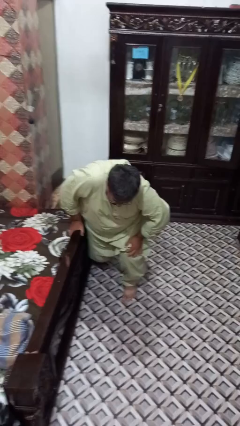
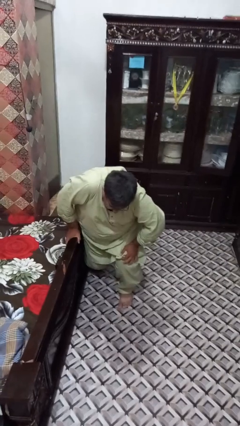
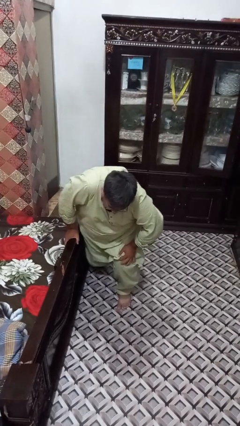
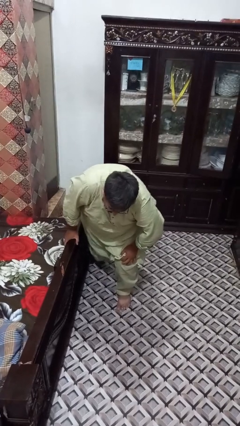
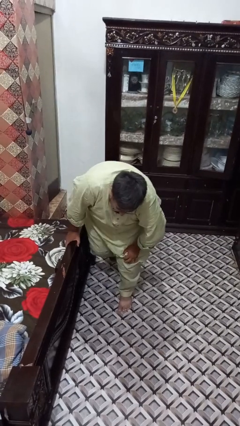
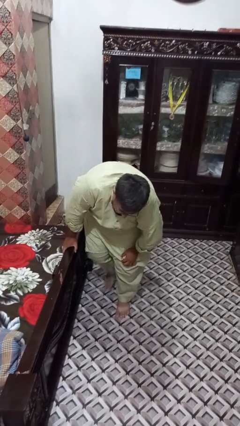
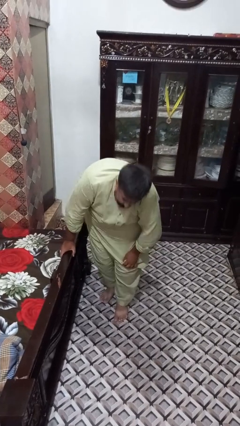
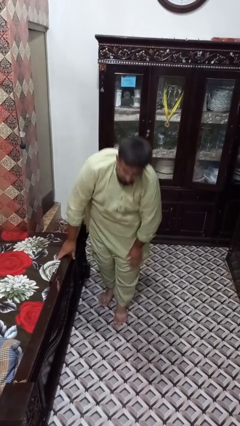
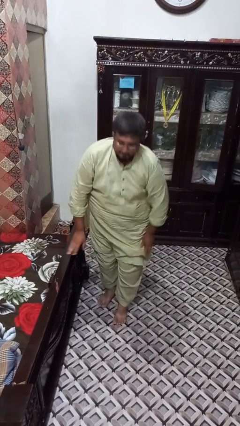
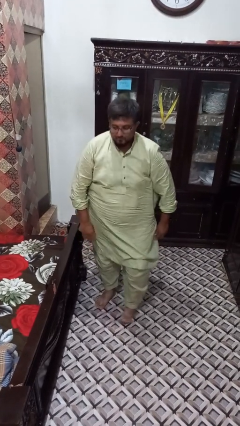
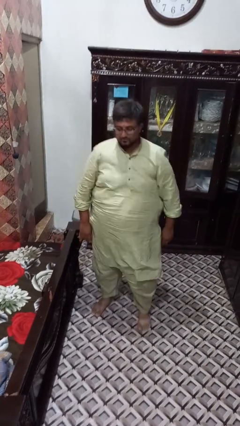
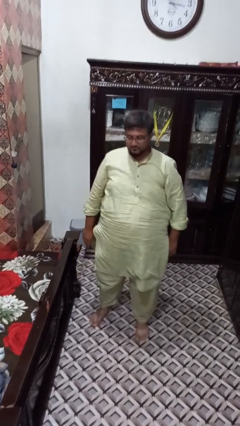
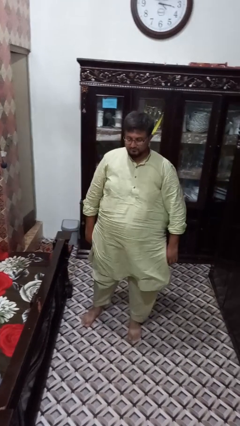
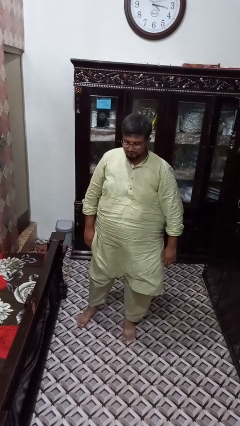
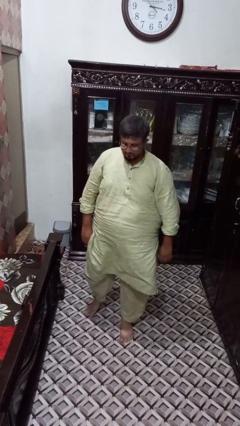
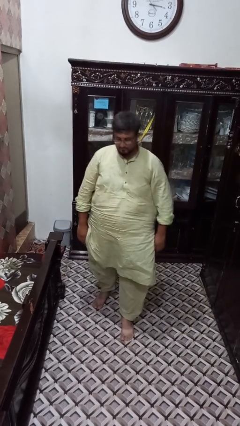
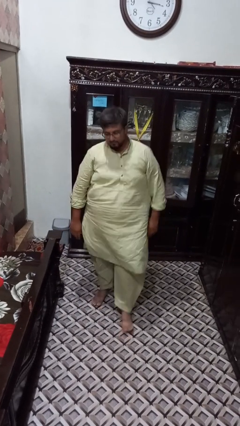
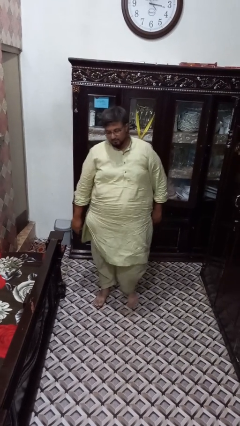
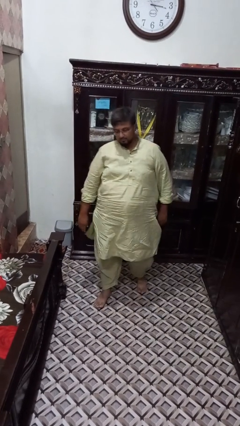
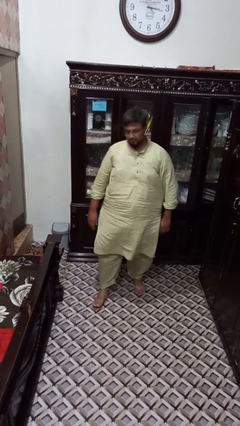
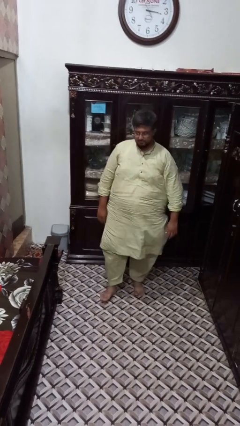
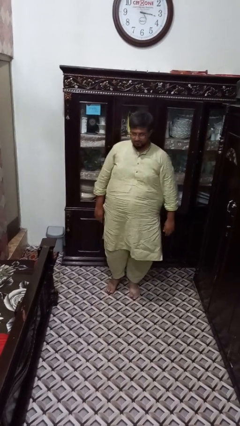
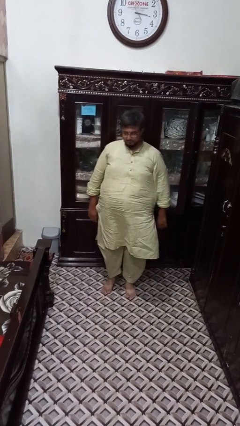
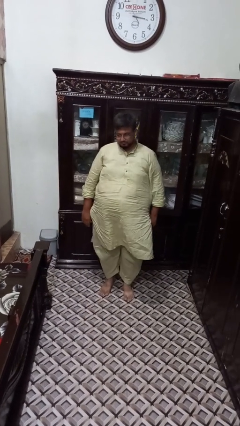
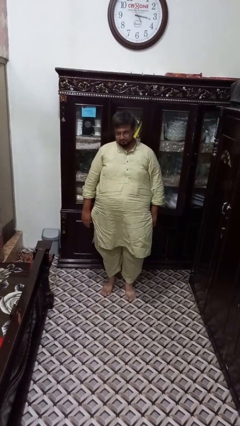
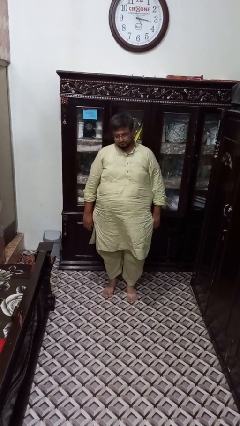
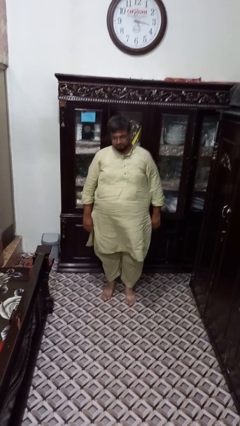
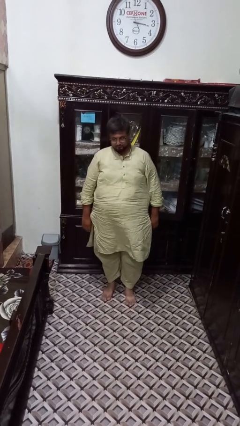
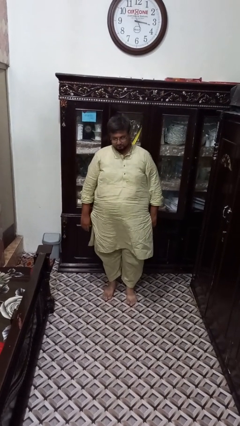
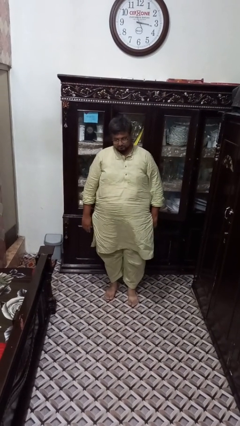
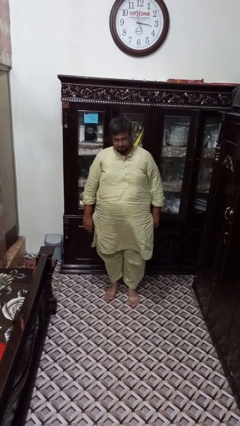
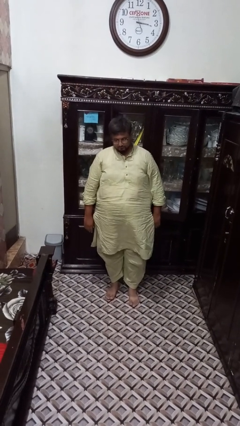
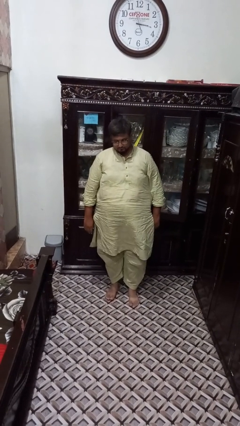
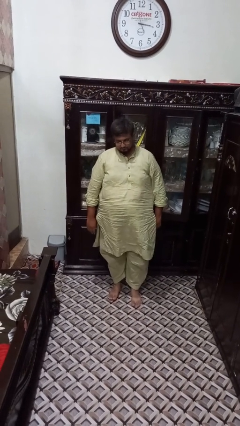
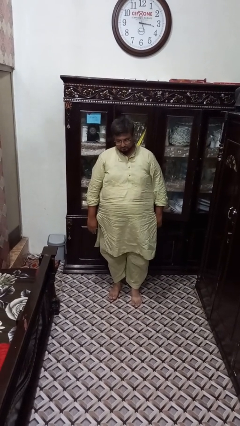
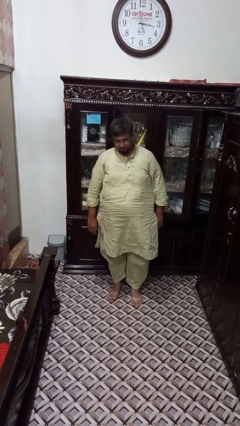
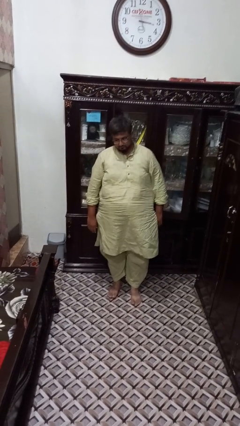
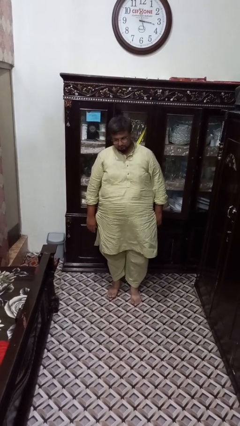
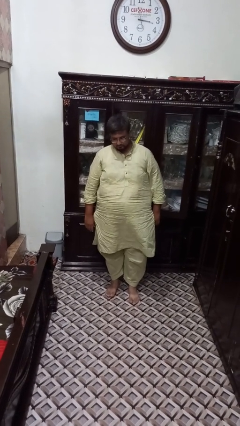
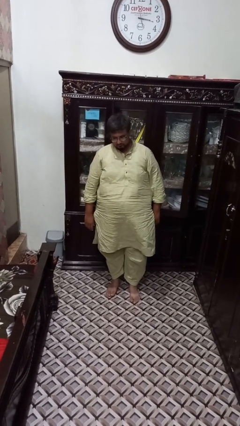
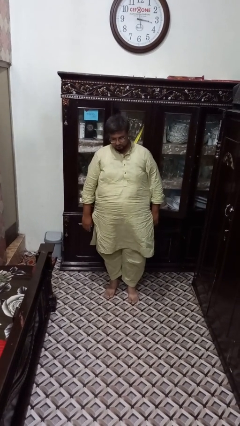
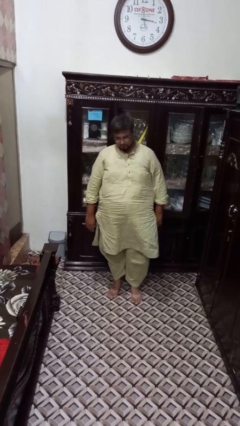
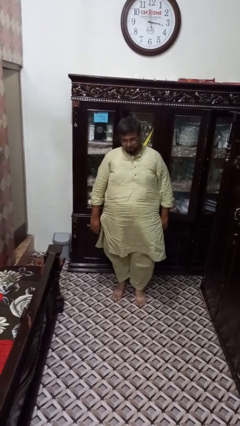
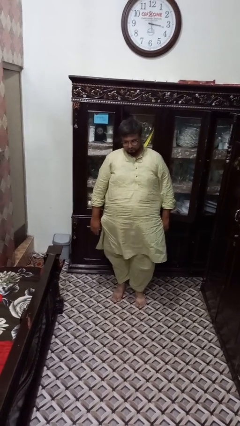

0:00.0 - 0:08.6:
person stands up from floor

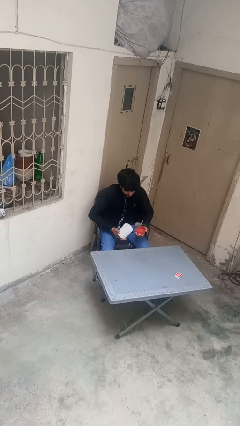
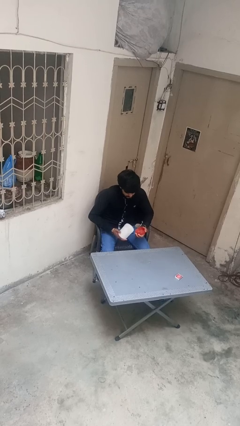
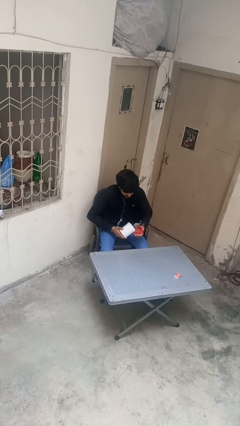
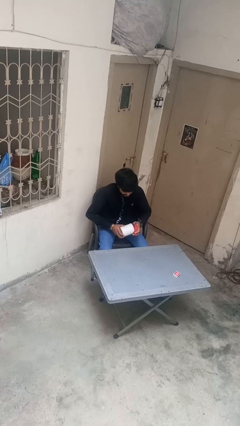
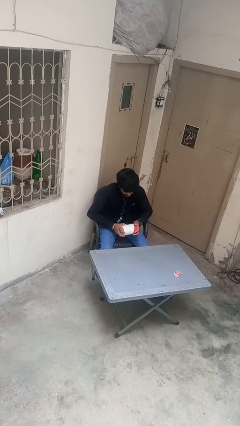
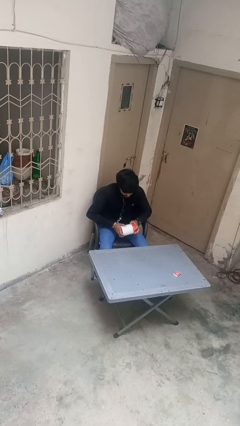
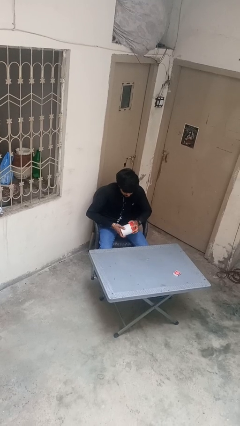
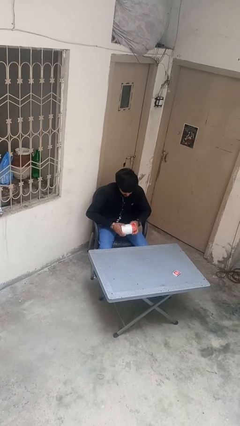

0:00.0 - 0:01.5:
person closes jar

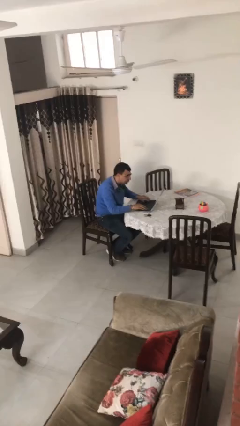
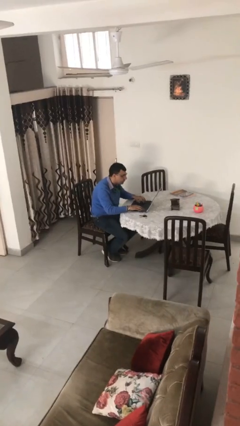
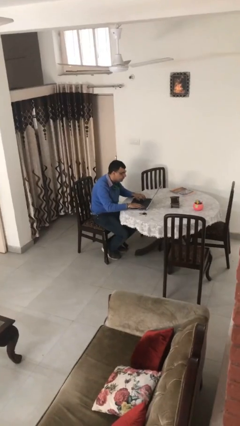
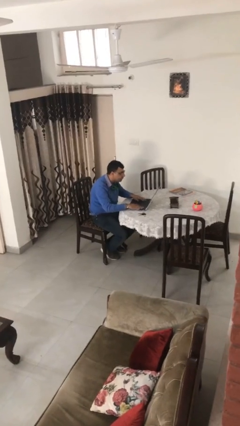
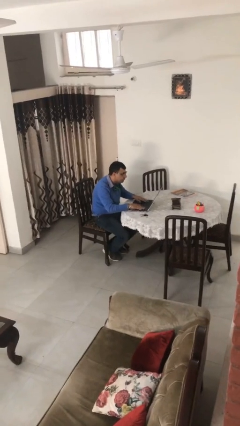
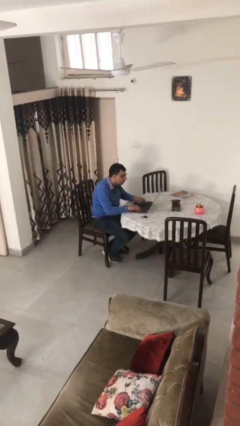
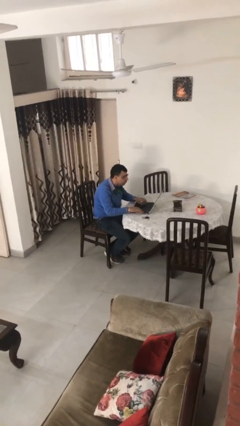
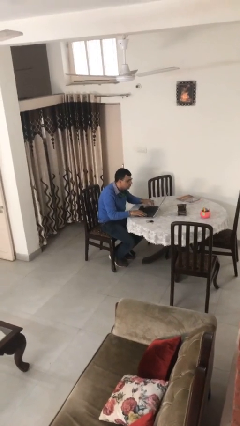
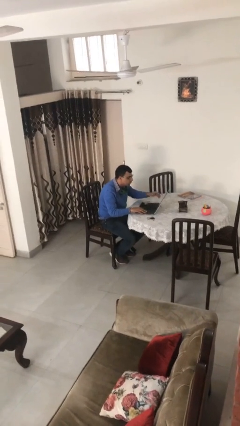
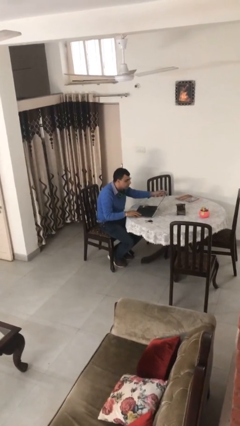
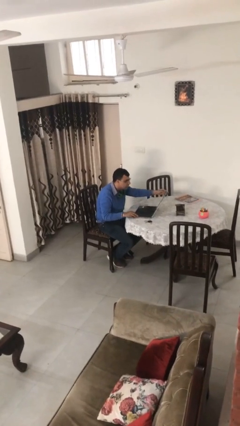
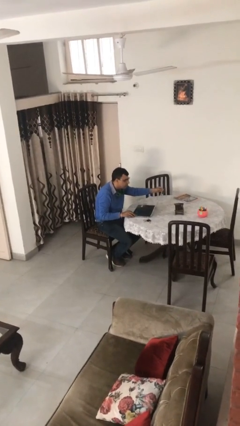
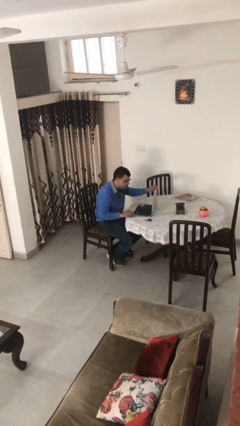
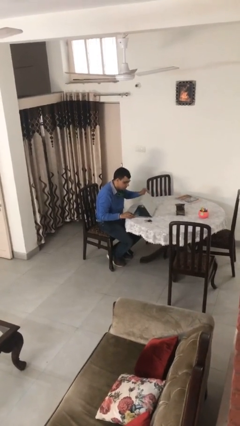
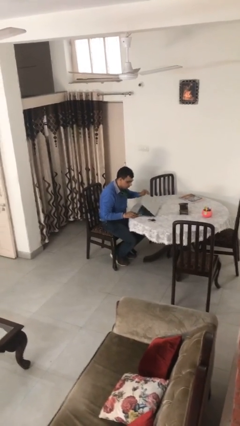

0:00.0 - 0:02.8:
person interacts with laptop

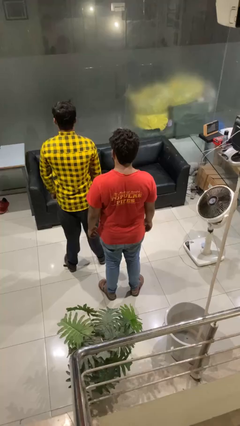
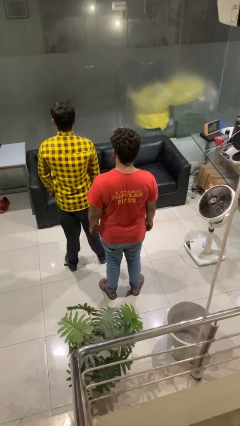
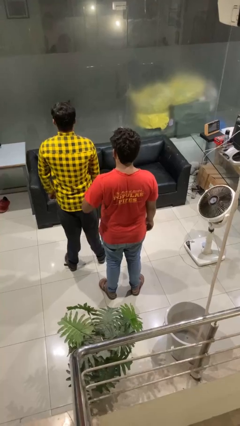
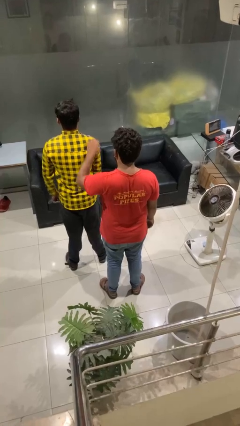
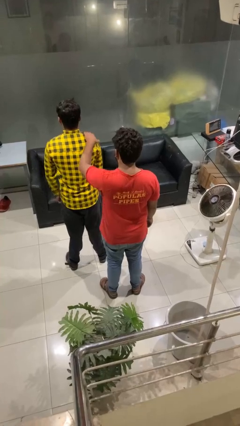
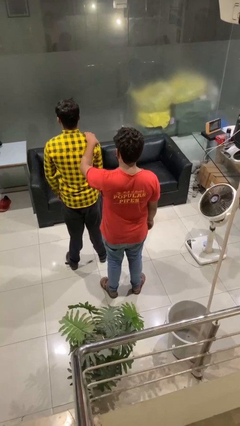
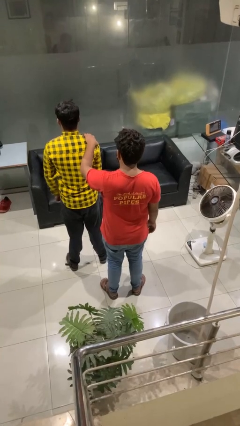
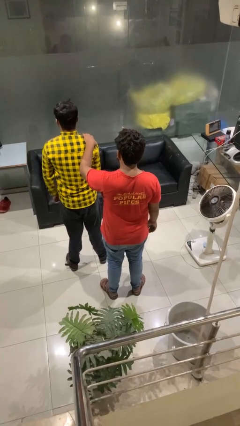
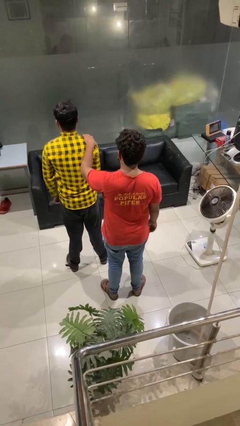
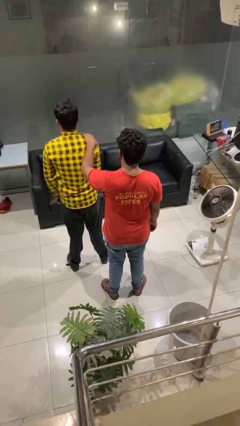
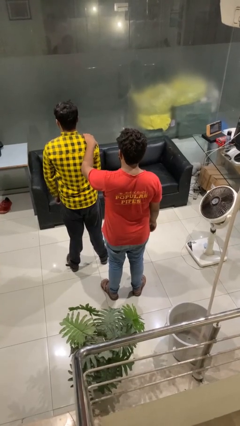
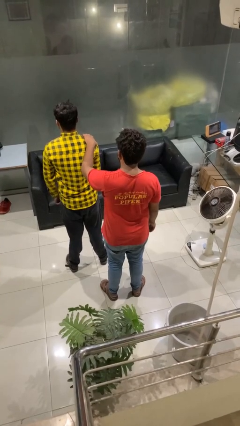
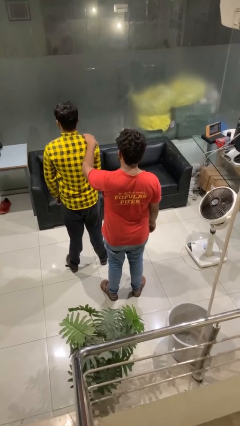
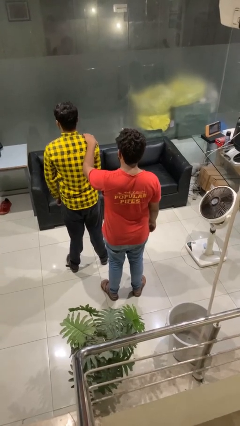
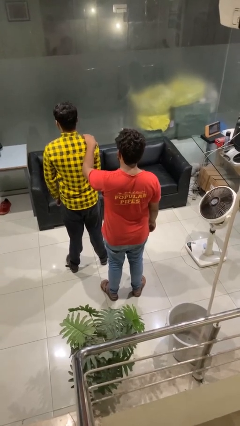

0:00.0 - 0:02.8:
person grabs person by shoulder

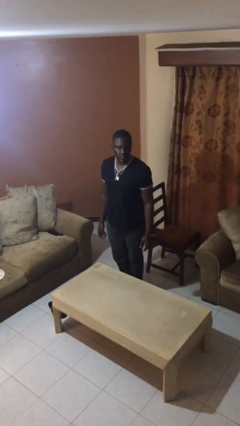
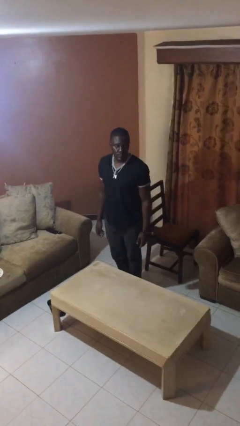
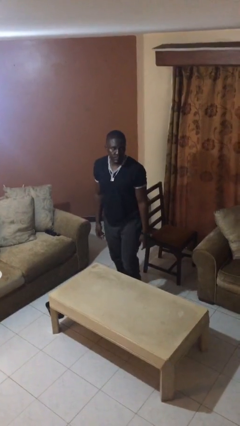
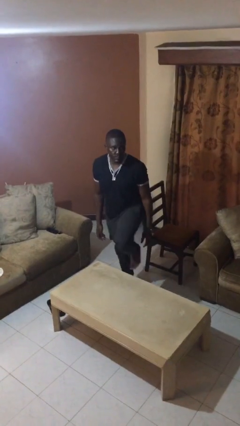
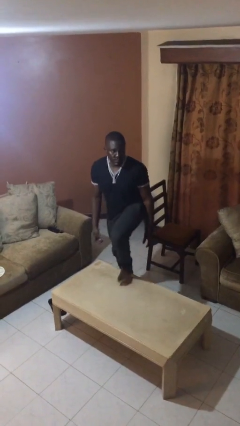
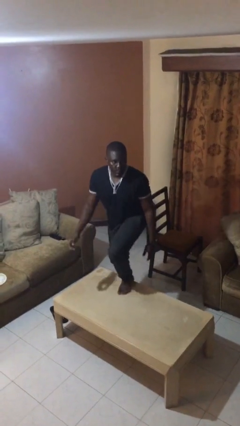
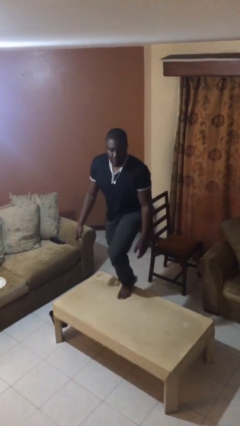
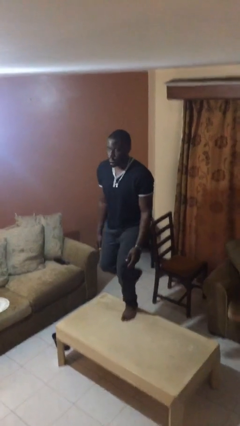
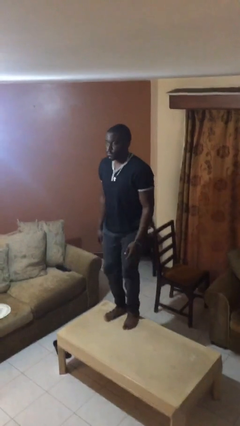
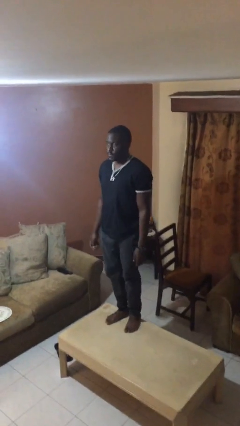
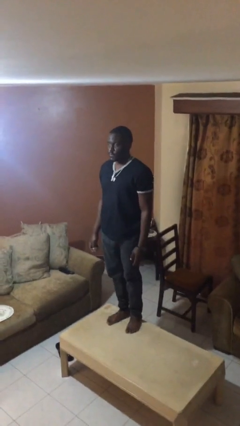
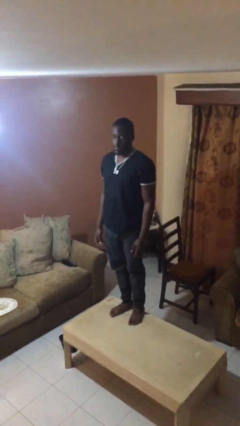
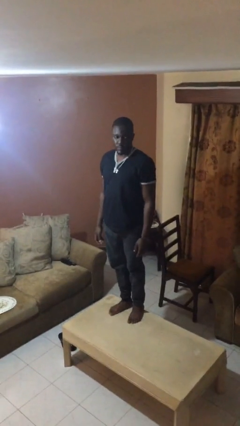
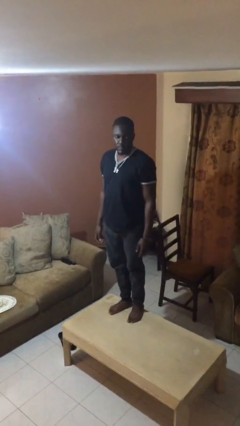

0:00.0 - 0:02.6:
person climbs on table
